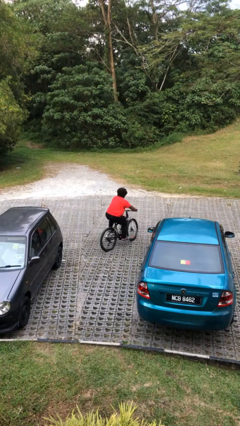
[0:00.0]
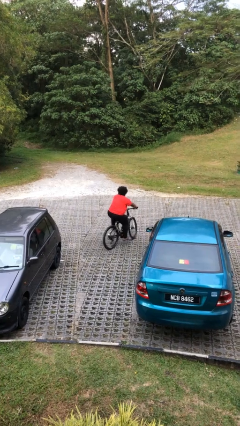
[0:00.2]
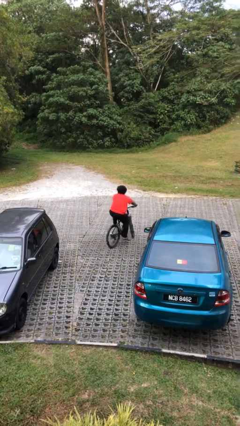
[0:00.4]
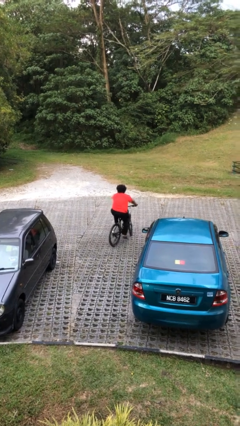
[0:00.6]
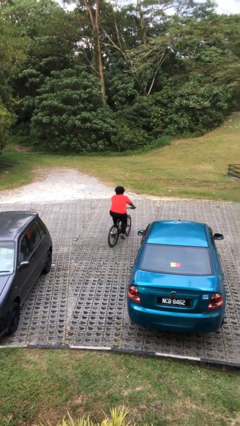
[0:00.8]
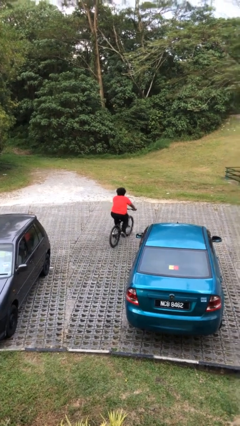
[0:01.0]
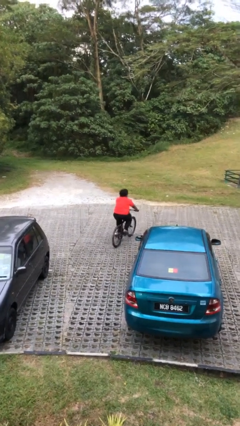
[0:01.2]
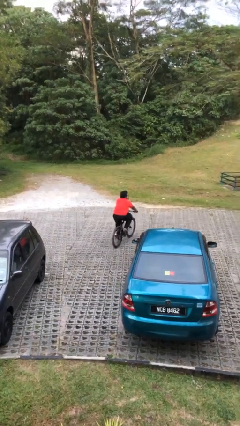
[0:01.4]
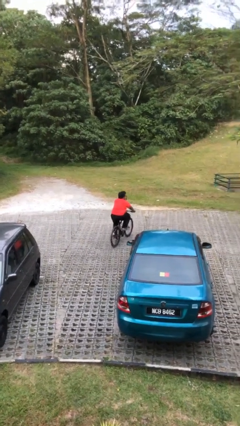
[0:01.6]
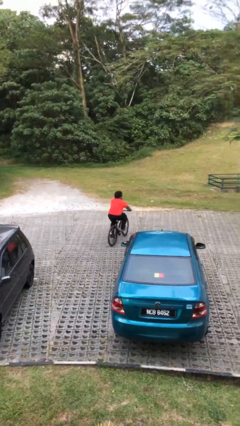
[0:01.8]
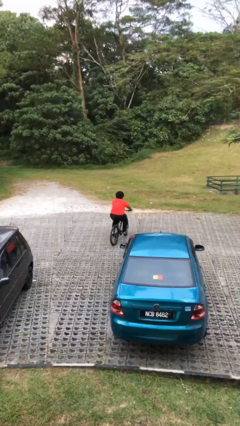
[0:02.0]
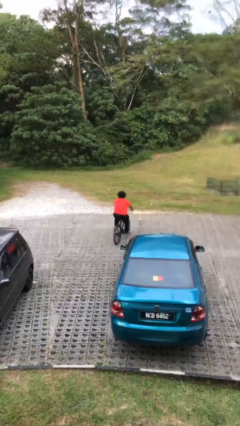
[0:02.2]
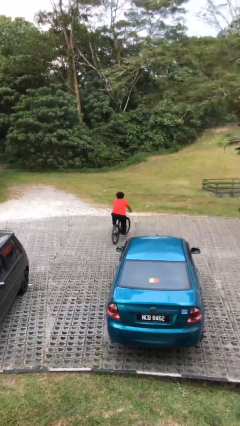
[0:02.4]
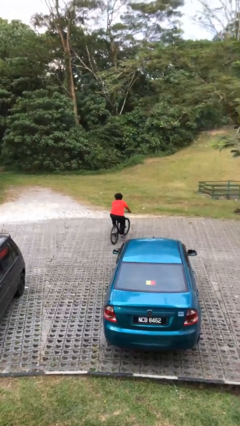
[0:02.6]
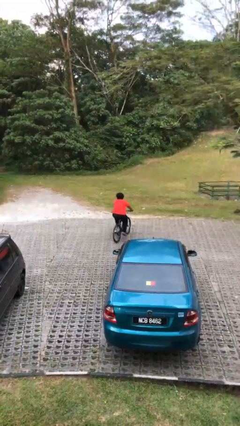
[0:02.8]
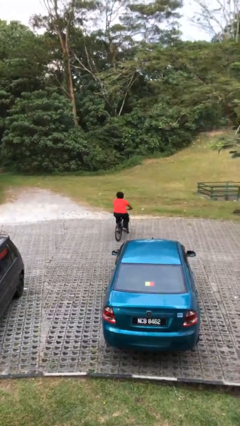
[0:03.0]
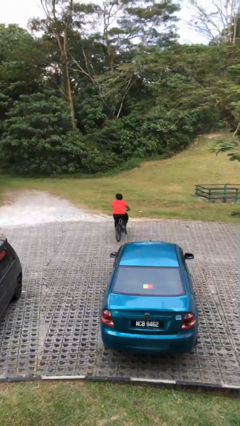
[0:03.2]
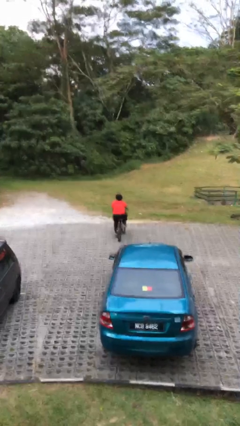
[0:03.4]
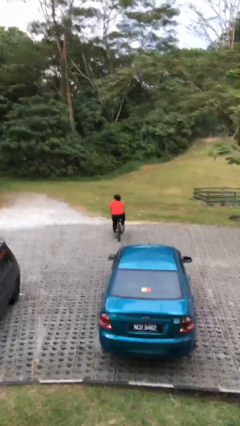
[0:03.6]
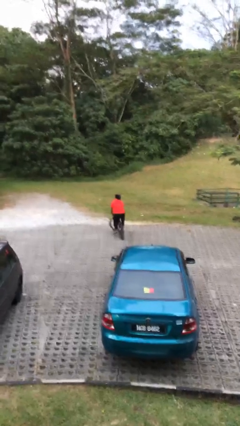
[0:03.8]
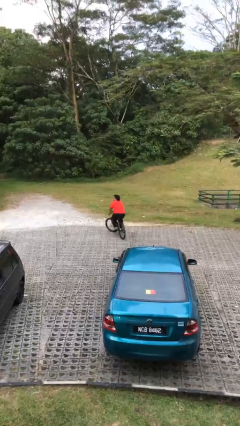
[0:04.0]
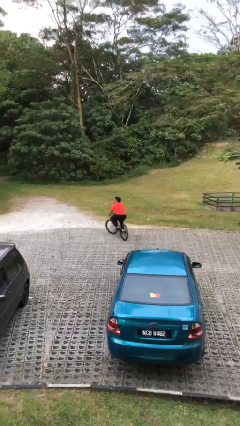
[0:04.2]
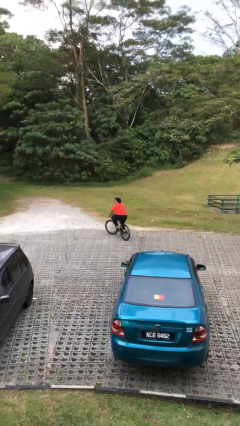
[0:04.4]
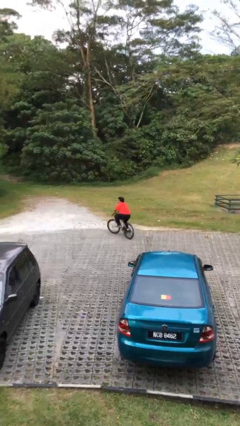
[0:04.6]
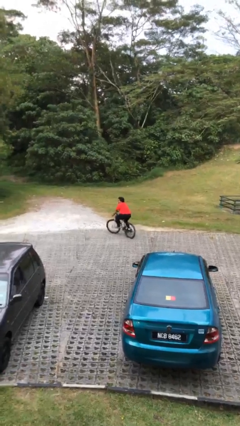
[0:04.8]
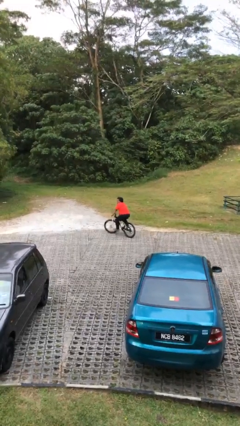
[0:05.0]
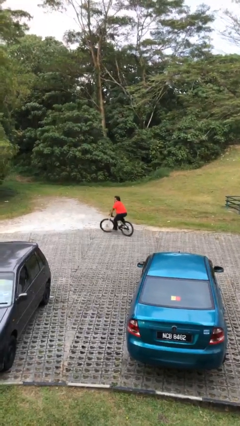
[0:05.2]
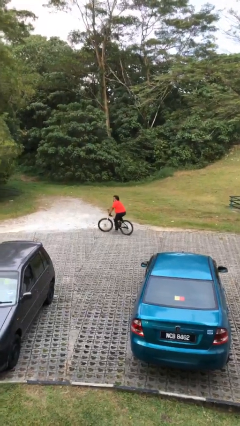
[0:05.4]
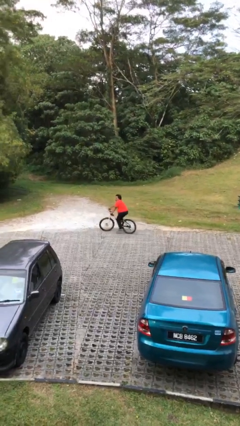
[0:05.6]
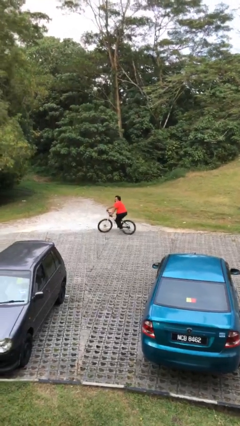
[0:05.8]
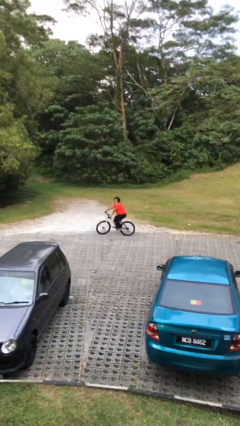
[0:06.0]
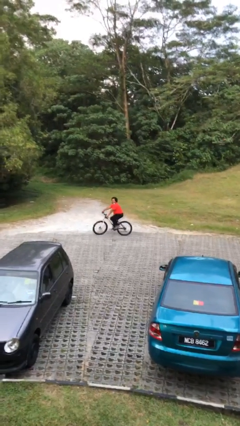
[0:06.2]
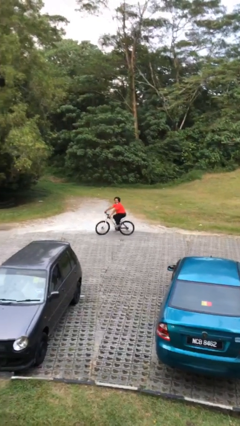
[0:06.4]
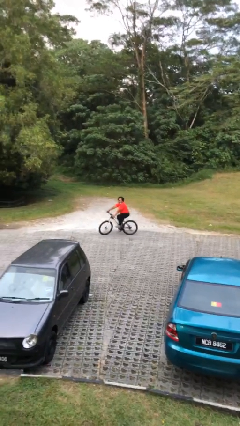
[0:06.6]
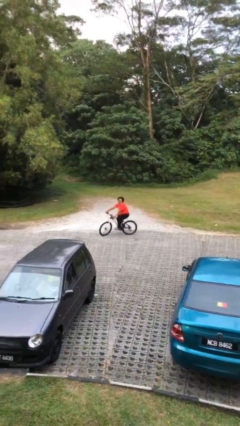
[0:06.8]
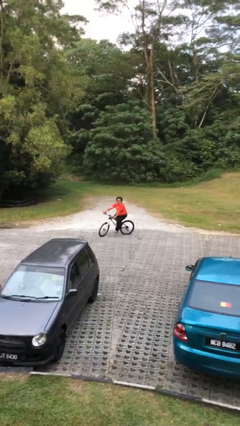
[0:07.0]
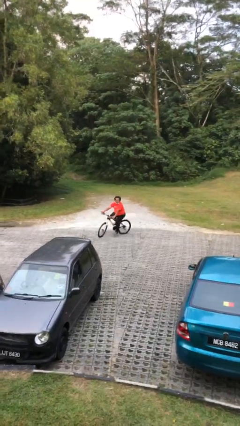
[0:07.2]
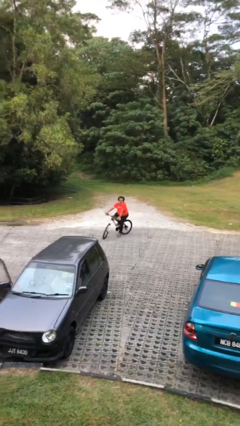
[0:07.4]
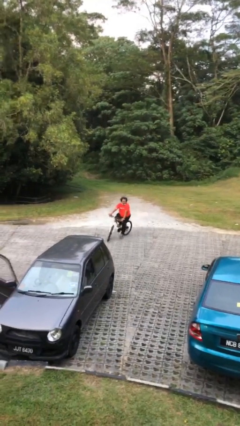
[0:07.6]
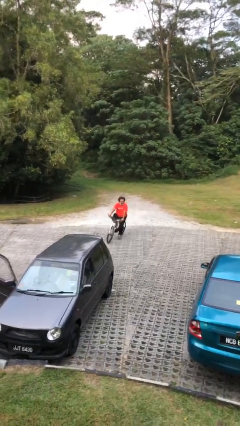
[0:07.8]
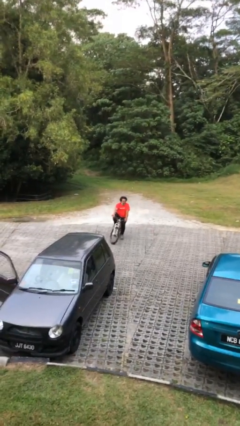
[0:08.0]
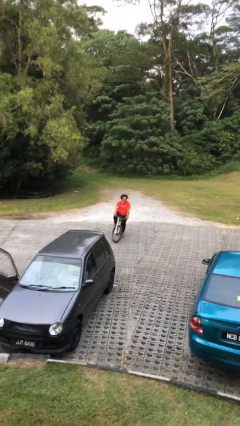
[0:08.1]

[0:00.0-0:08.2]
person rides bicycle

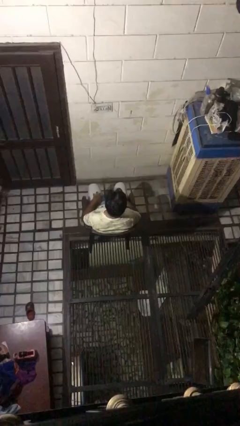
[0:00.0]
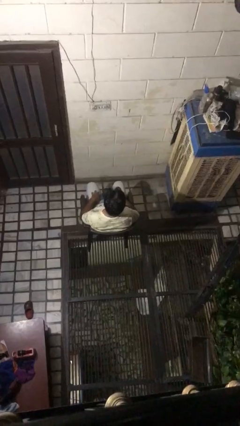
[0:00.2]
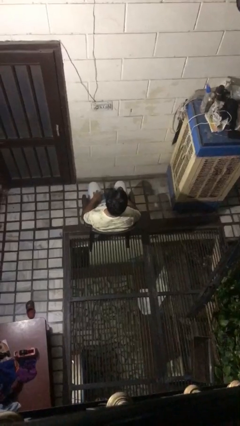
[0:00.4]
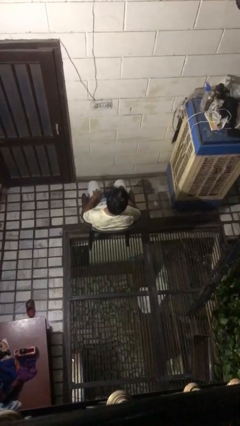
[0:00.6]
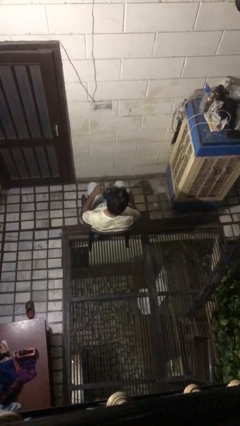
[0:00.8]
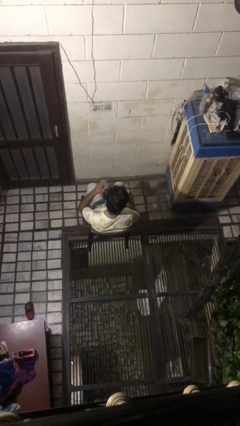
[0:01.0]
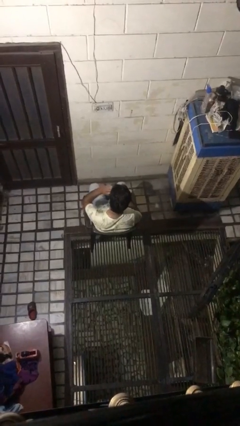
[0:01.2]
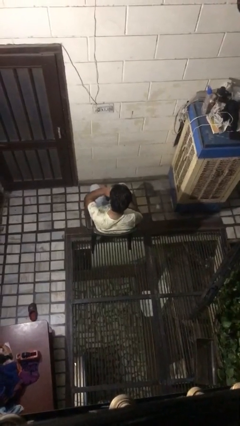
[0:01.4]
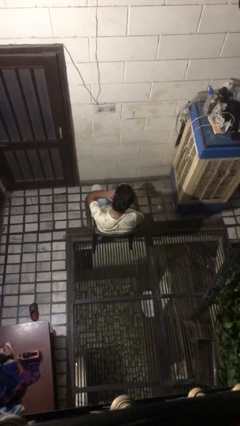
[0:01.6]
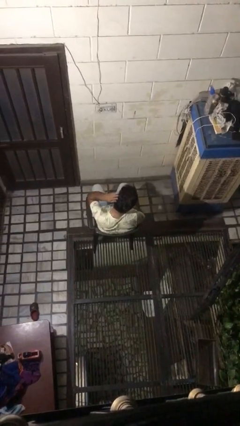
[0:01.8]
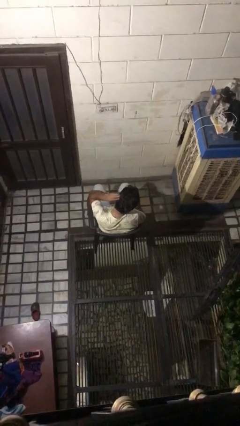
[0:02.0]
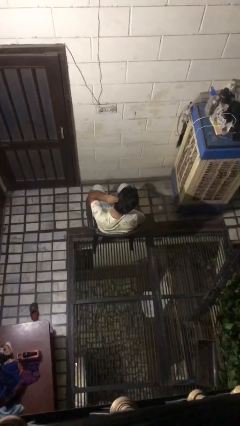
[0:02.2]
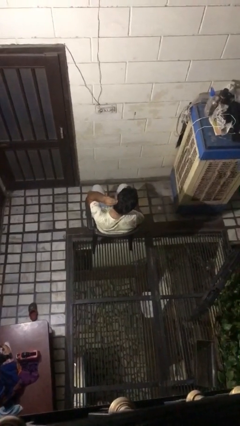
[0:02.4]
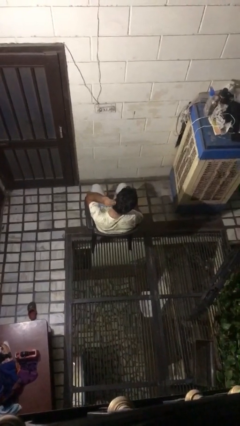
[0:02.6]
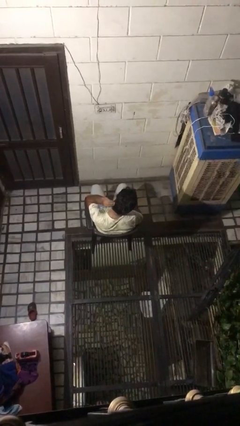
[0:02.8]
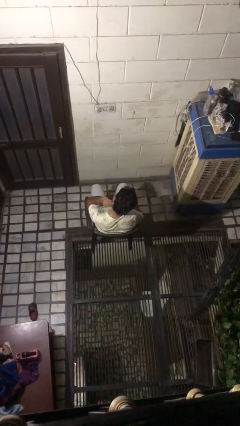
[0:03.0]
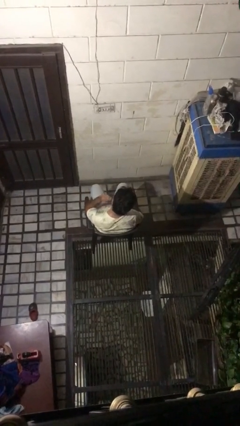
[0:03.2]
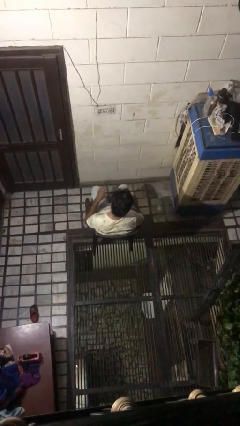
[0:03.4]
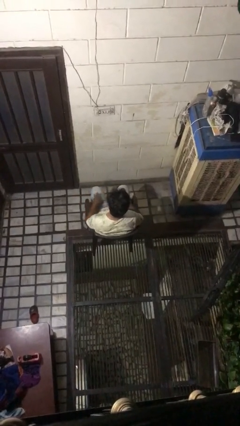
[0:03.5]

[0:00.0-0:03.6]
person strokes hair

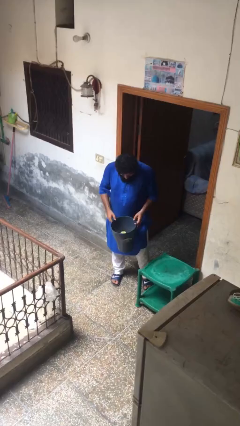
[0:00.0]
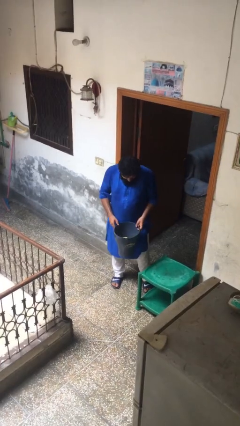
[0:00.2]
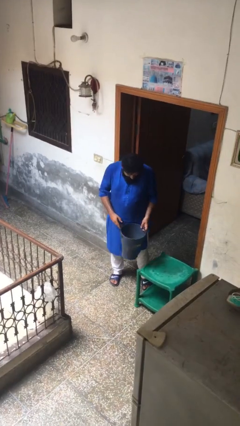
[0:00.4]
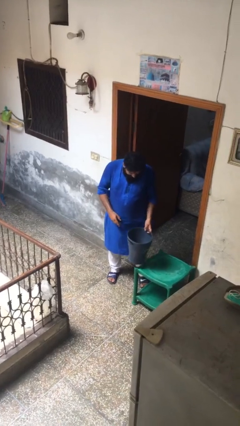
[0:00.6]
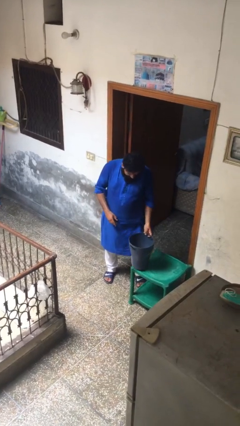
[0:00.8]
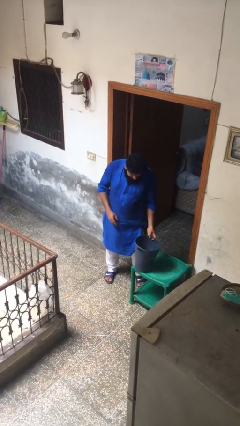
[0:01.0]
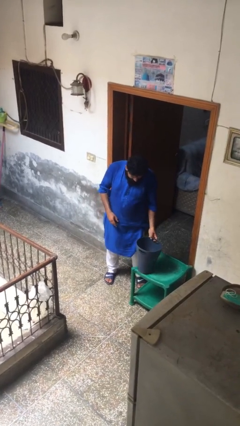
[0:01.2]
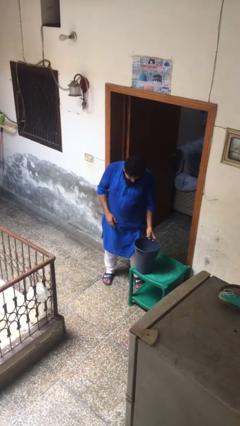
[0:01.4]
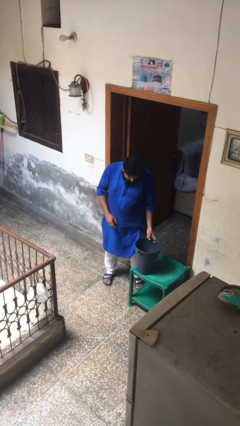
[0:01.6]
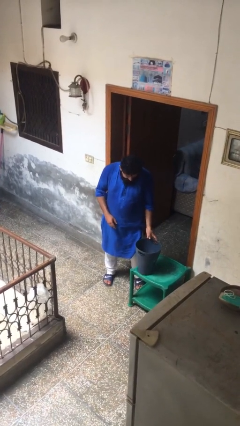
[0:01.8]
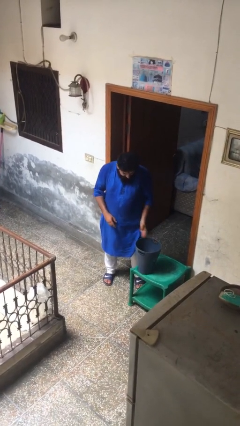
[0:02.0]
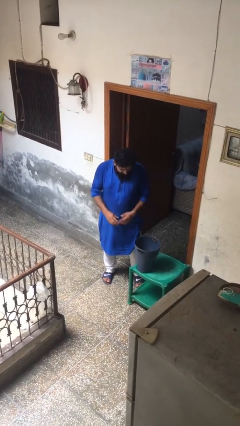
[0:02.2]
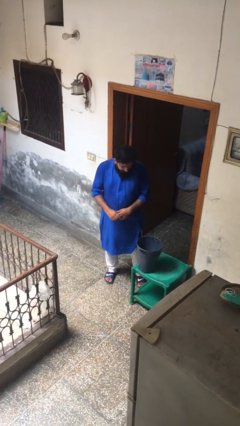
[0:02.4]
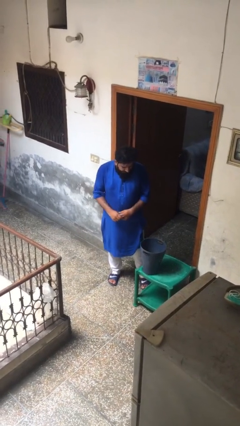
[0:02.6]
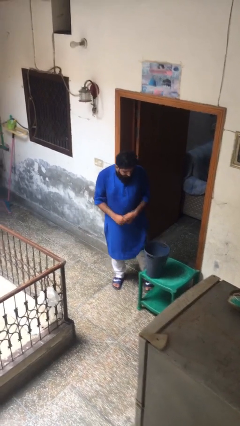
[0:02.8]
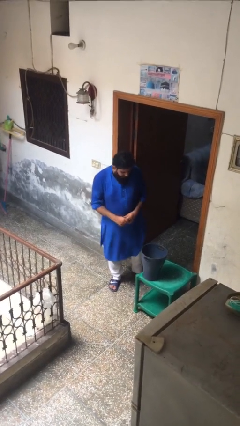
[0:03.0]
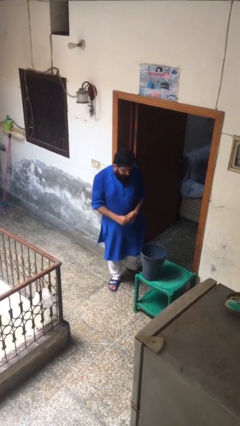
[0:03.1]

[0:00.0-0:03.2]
person puts down object on table

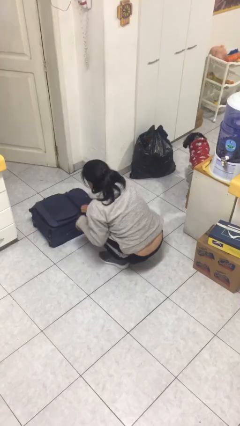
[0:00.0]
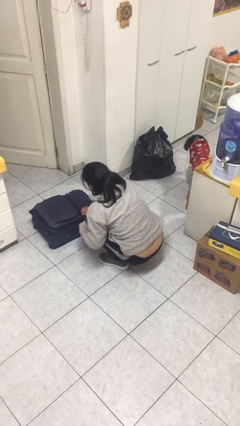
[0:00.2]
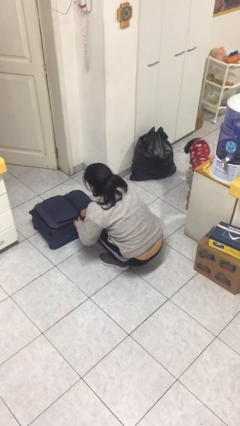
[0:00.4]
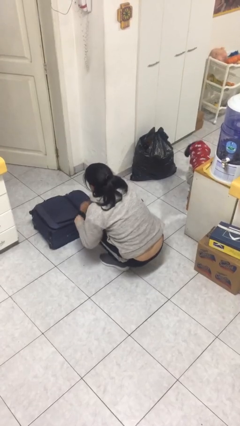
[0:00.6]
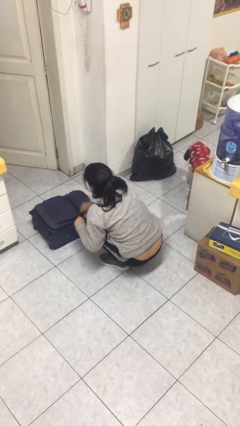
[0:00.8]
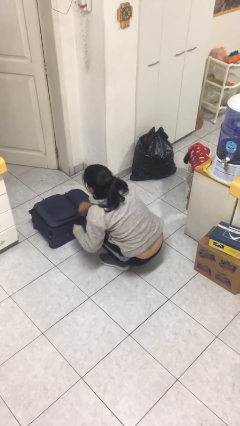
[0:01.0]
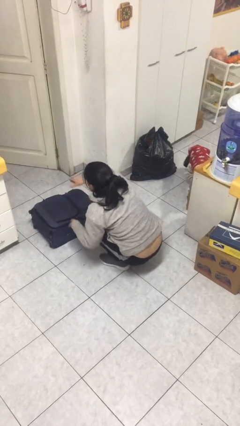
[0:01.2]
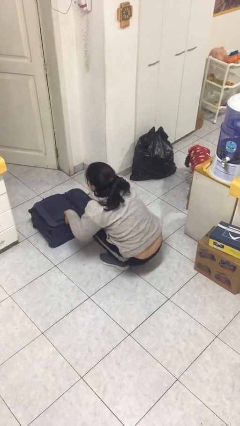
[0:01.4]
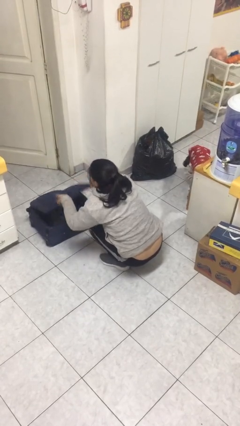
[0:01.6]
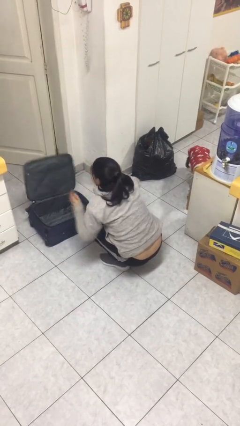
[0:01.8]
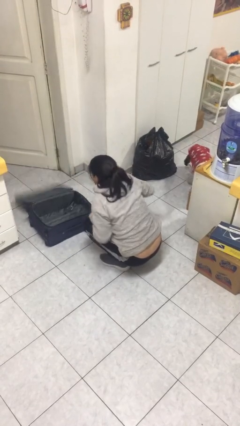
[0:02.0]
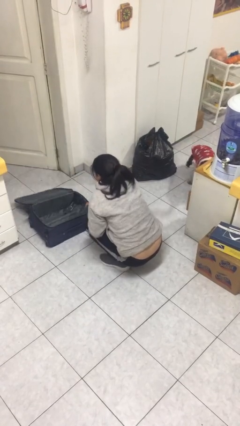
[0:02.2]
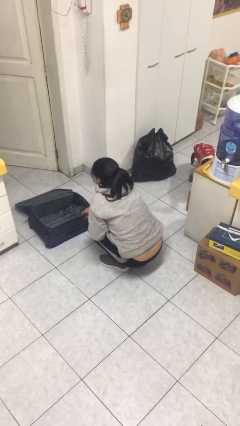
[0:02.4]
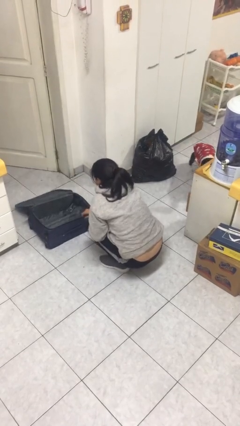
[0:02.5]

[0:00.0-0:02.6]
person opens suitcase
